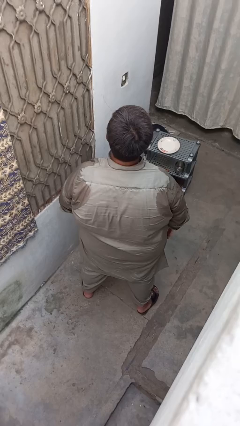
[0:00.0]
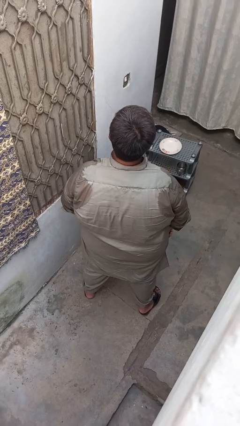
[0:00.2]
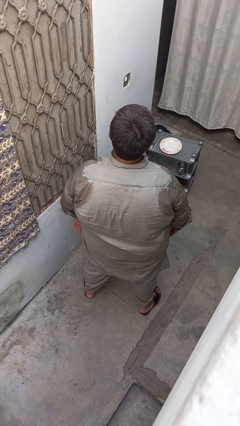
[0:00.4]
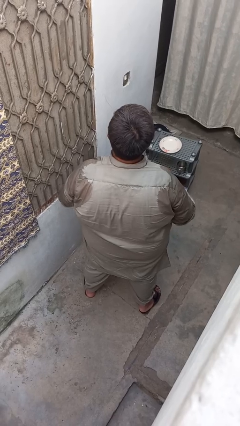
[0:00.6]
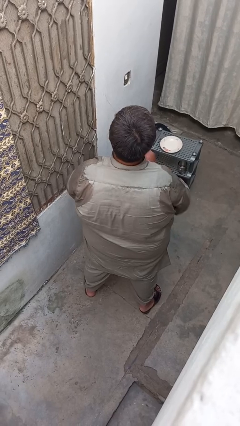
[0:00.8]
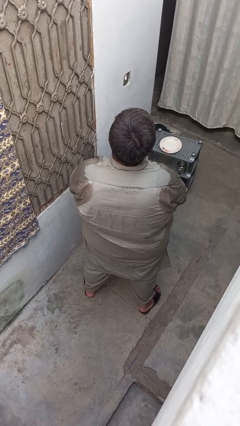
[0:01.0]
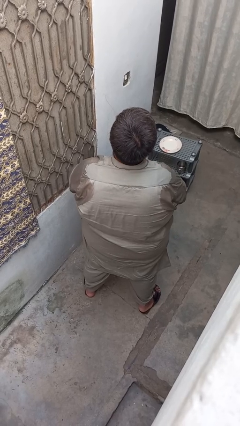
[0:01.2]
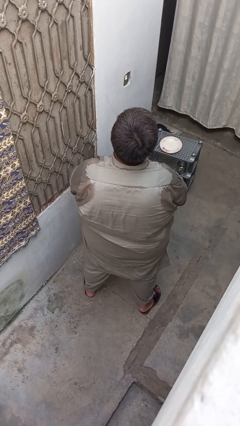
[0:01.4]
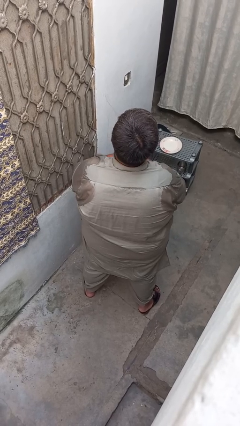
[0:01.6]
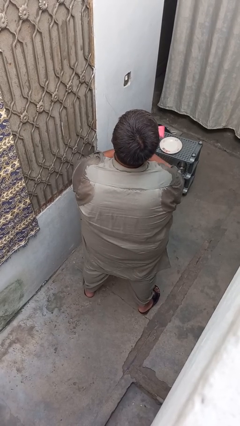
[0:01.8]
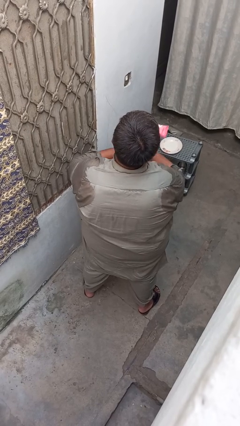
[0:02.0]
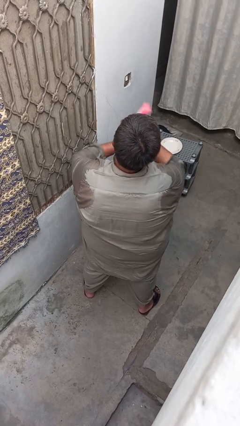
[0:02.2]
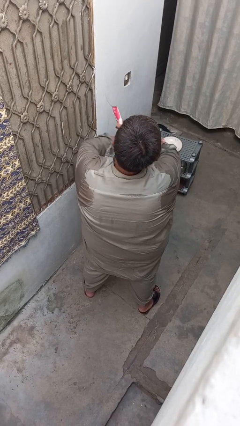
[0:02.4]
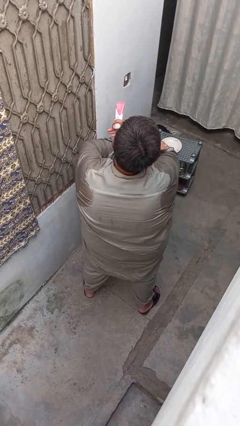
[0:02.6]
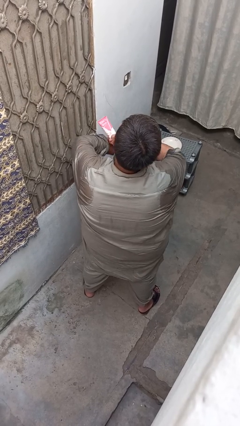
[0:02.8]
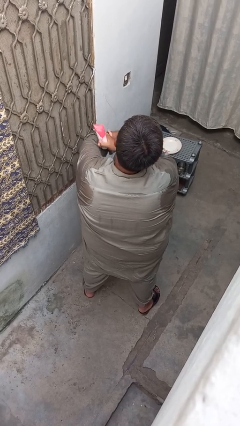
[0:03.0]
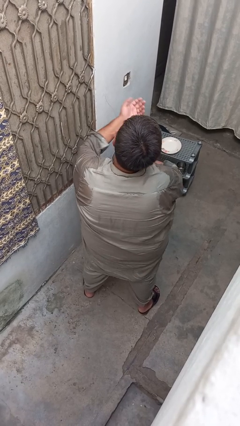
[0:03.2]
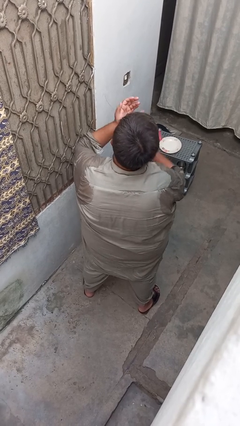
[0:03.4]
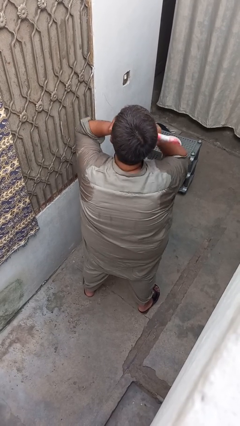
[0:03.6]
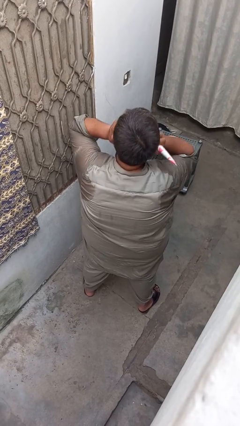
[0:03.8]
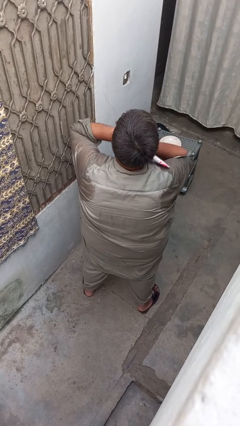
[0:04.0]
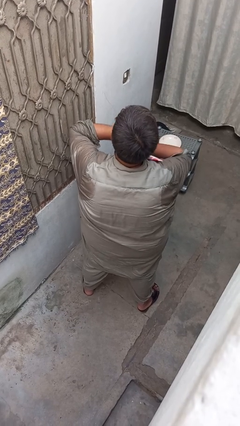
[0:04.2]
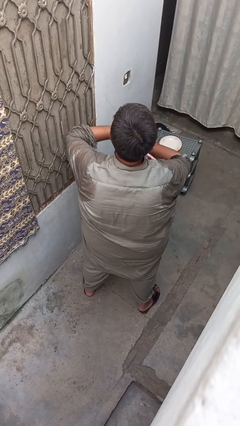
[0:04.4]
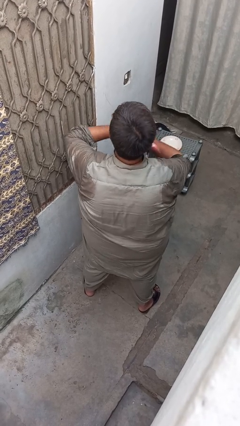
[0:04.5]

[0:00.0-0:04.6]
person applies sunscreen

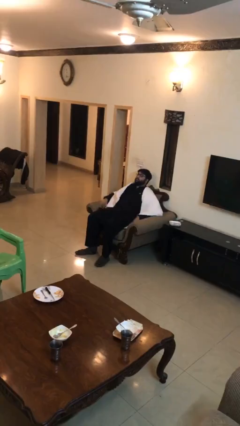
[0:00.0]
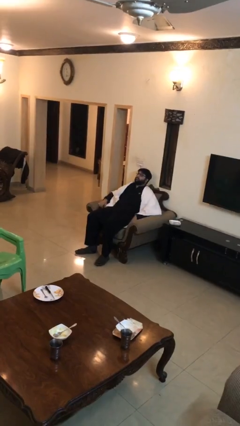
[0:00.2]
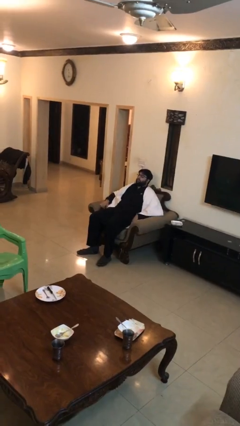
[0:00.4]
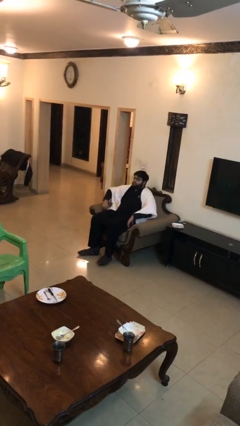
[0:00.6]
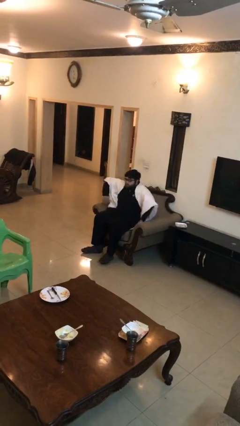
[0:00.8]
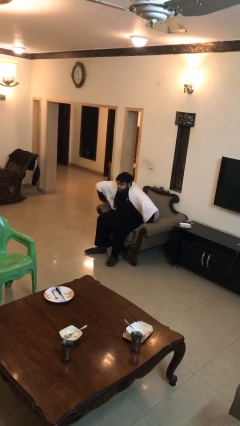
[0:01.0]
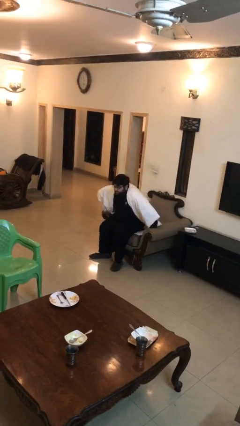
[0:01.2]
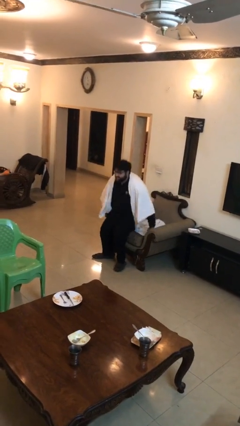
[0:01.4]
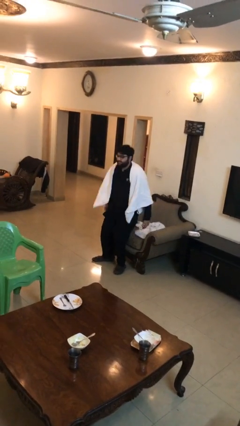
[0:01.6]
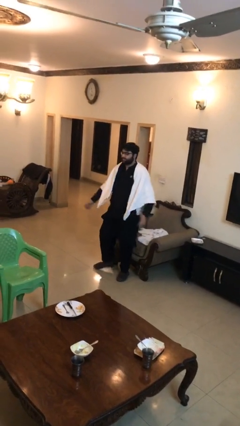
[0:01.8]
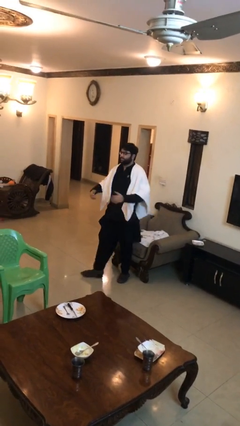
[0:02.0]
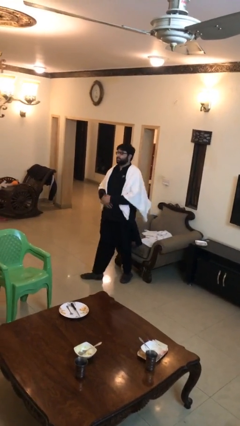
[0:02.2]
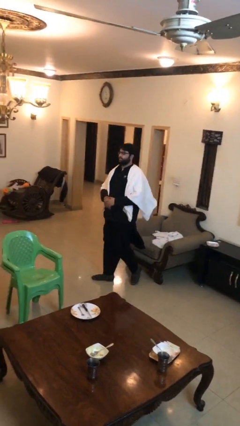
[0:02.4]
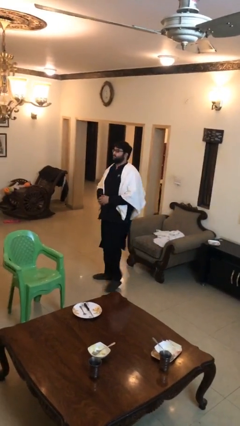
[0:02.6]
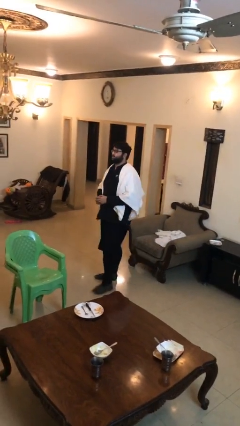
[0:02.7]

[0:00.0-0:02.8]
person stands up

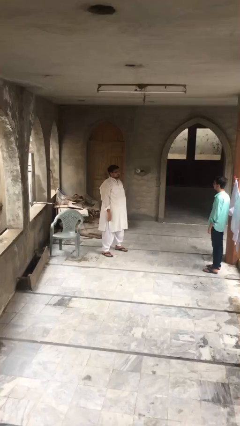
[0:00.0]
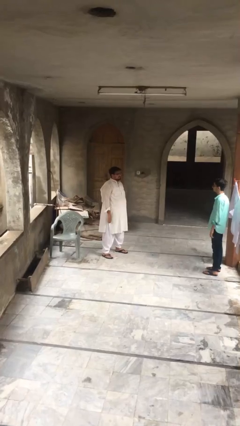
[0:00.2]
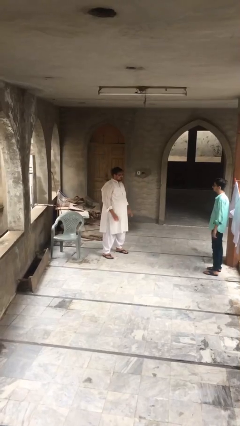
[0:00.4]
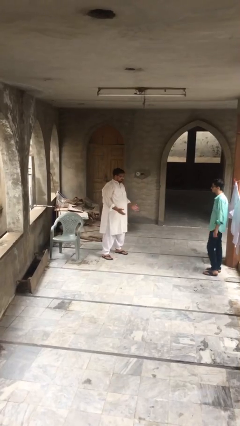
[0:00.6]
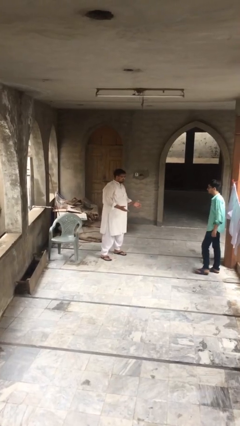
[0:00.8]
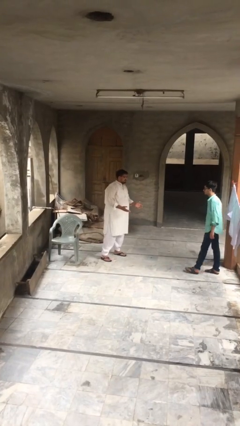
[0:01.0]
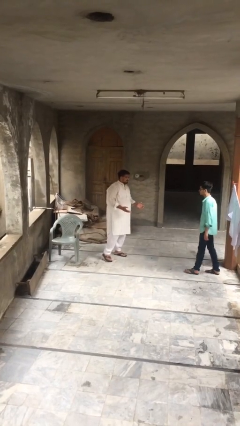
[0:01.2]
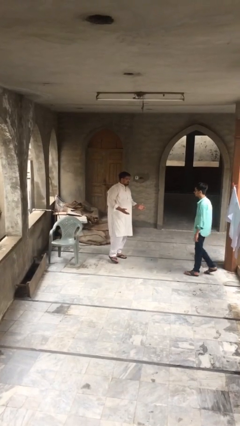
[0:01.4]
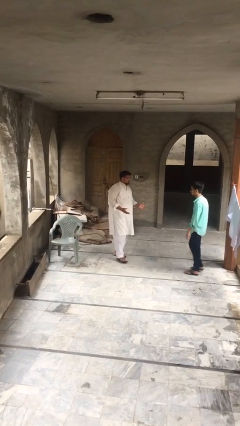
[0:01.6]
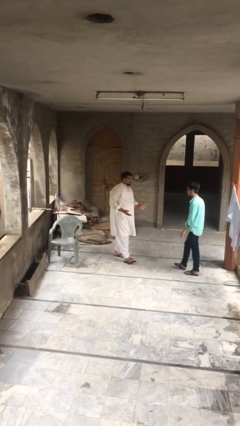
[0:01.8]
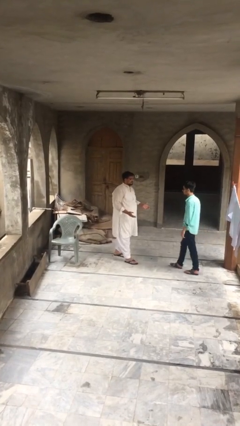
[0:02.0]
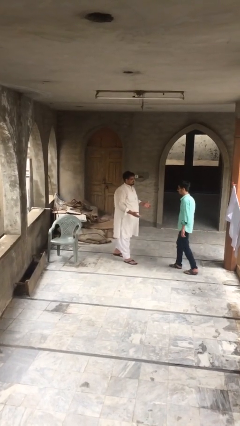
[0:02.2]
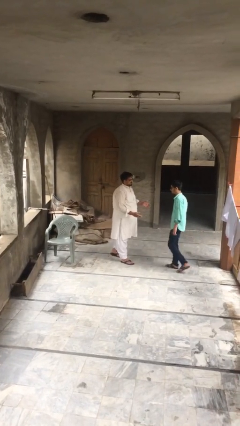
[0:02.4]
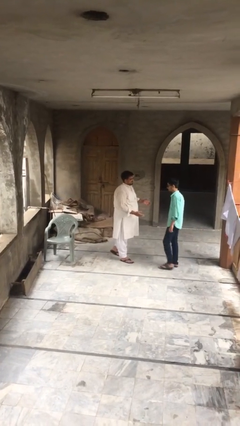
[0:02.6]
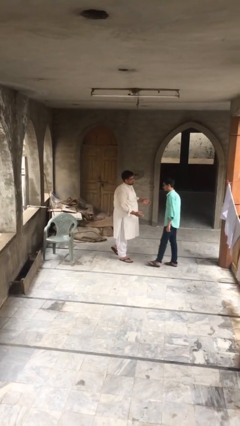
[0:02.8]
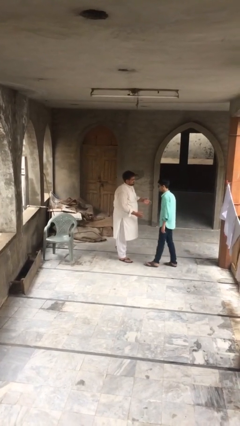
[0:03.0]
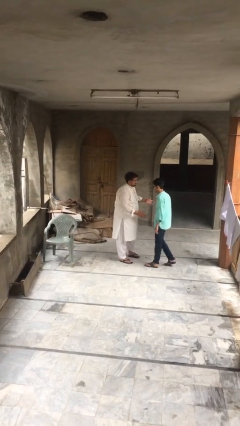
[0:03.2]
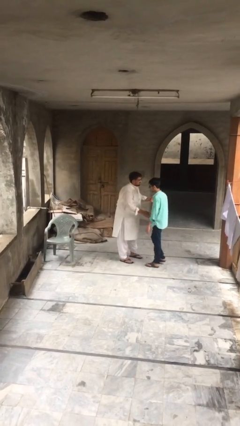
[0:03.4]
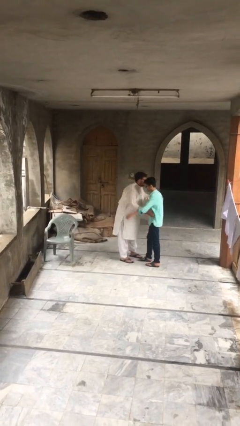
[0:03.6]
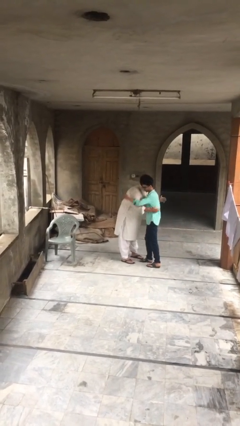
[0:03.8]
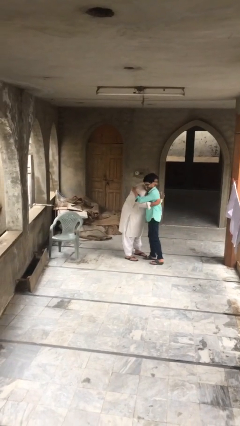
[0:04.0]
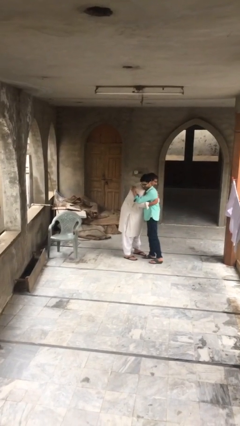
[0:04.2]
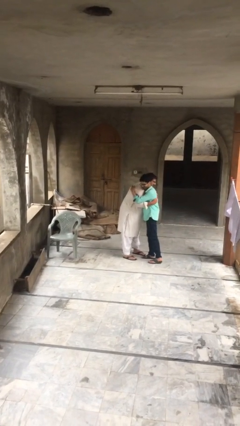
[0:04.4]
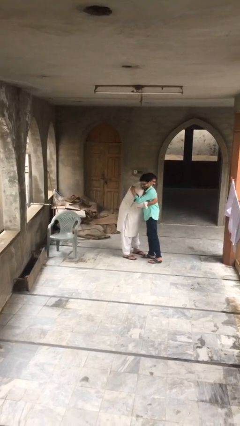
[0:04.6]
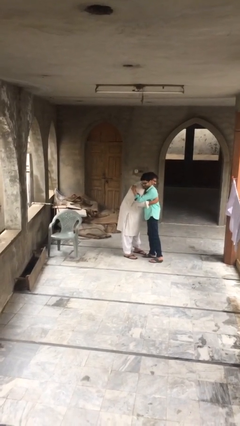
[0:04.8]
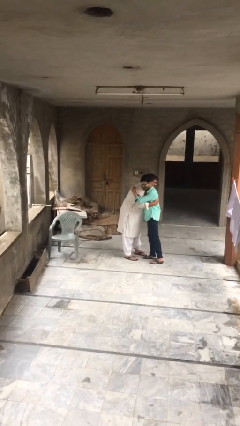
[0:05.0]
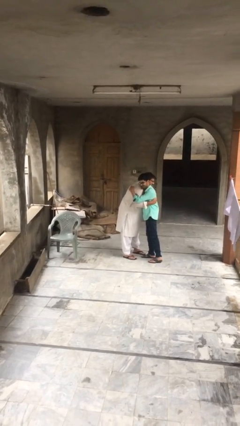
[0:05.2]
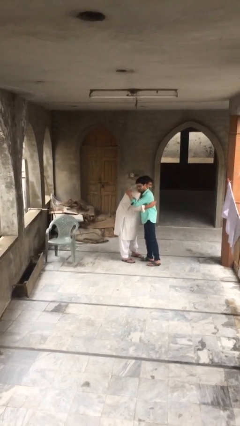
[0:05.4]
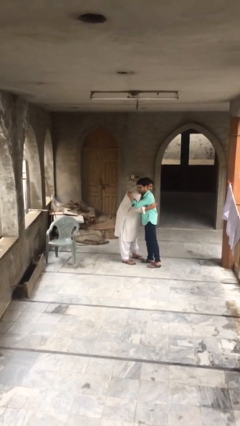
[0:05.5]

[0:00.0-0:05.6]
person embraces person

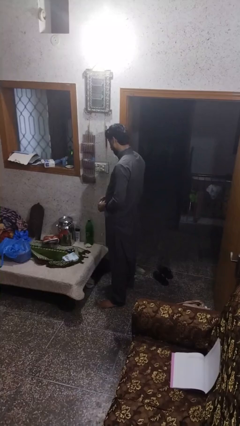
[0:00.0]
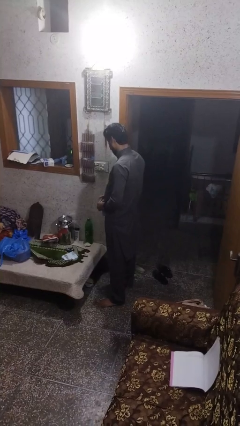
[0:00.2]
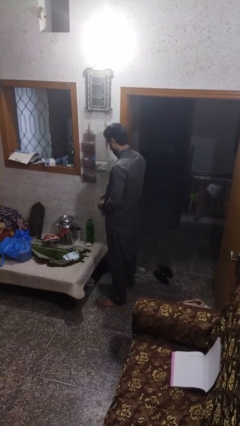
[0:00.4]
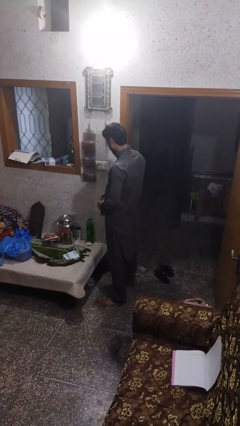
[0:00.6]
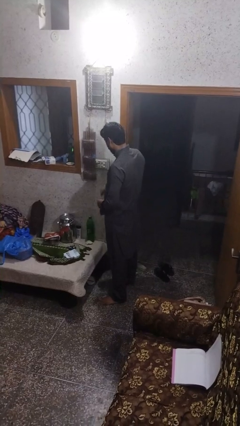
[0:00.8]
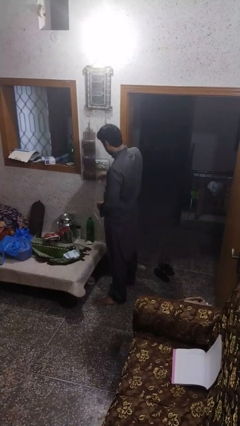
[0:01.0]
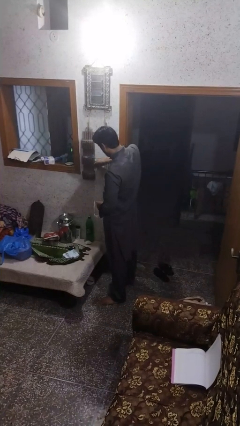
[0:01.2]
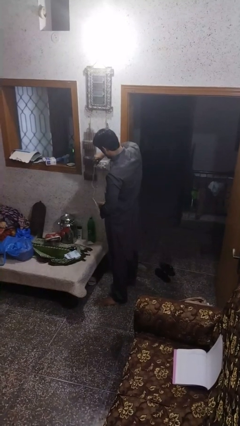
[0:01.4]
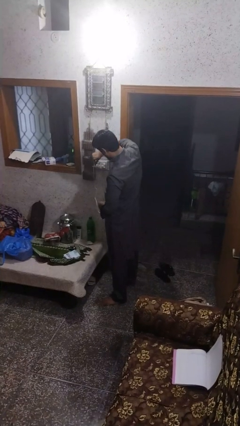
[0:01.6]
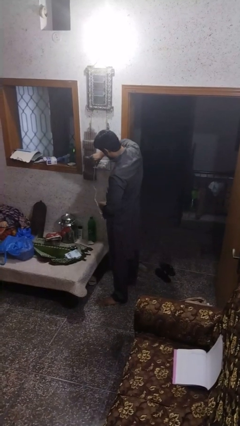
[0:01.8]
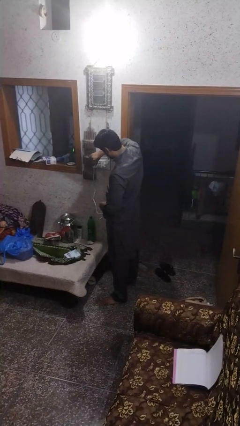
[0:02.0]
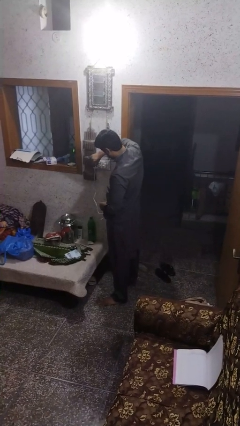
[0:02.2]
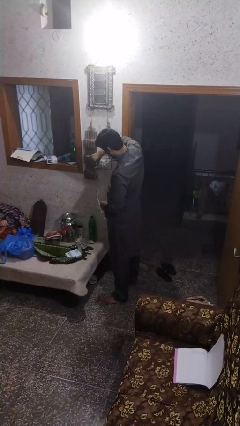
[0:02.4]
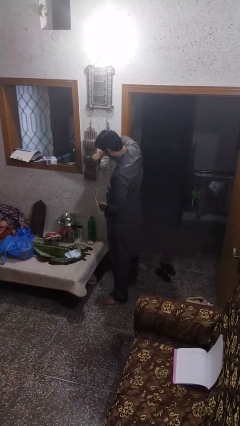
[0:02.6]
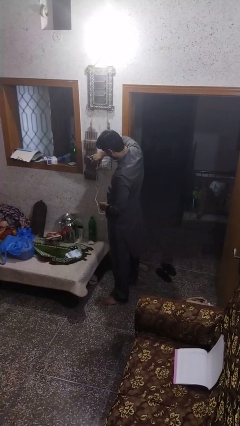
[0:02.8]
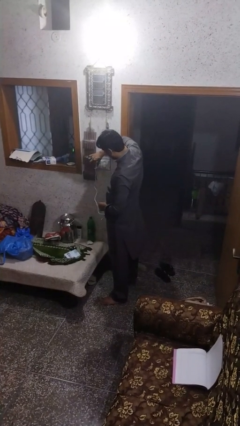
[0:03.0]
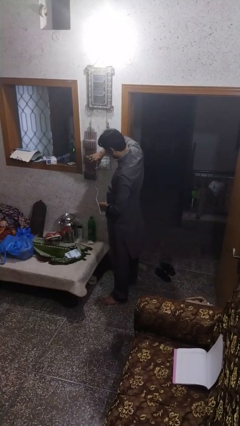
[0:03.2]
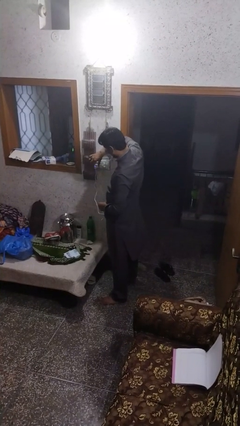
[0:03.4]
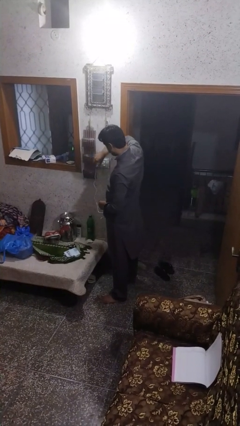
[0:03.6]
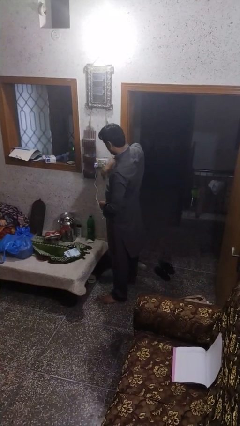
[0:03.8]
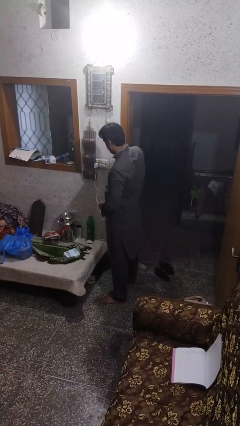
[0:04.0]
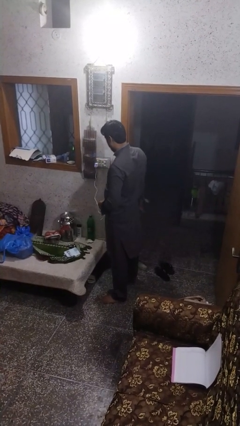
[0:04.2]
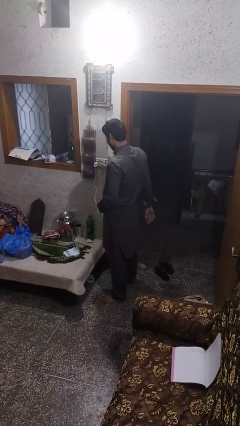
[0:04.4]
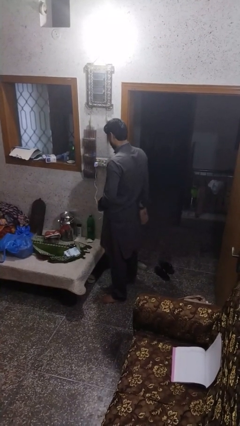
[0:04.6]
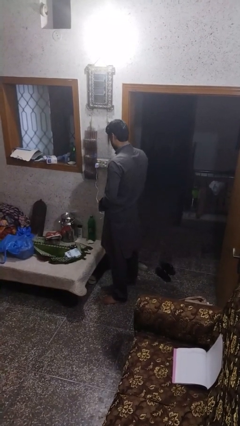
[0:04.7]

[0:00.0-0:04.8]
person plugs into electrical socket
